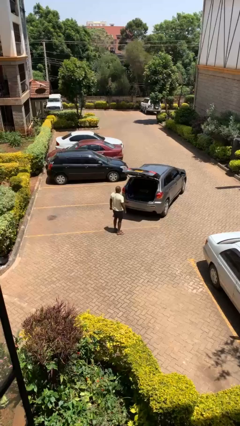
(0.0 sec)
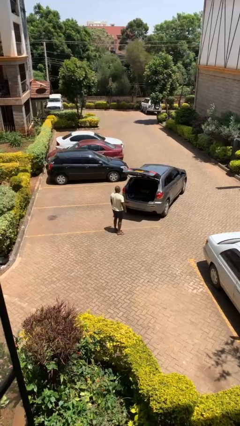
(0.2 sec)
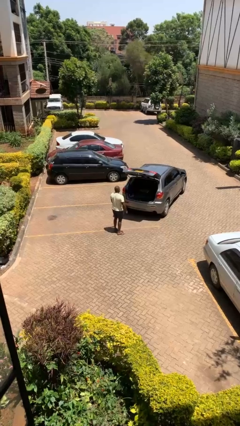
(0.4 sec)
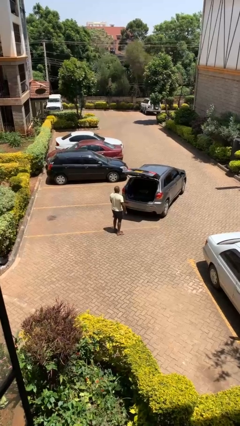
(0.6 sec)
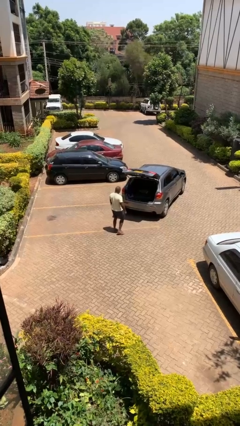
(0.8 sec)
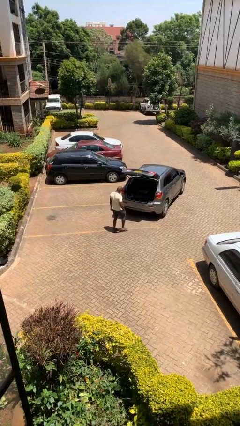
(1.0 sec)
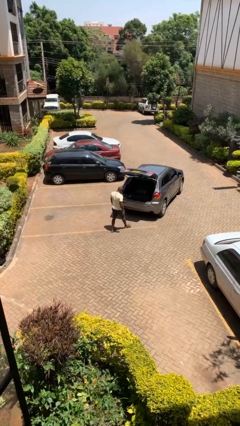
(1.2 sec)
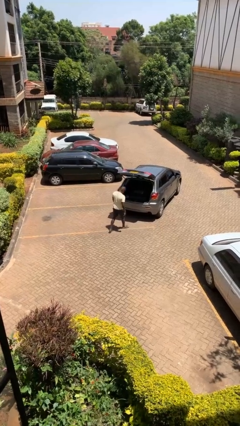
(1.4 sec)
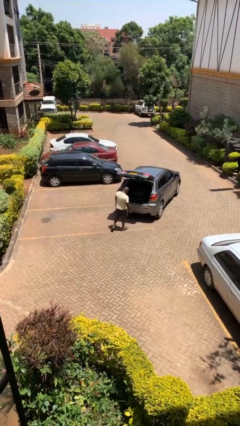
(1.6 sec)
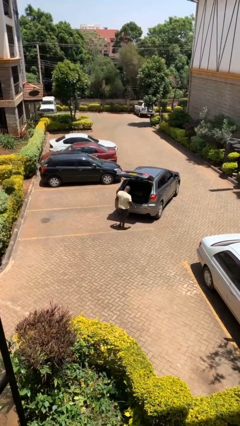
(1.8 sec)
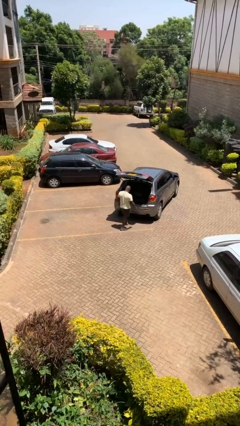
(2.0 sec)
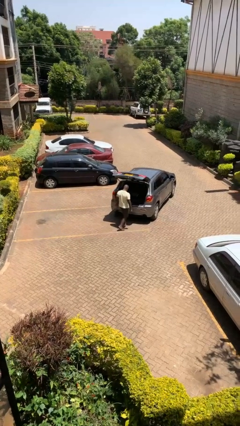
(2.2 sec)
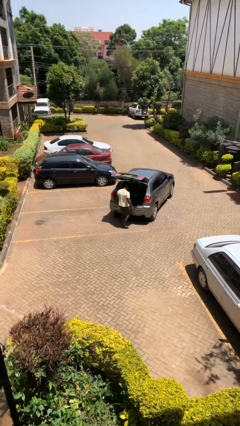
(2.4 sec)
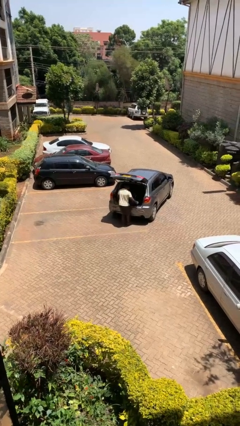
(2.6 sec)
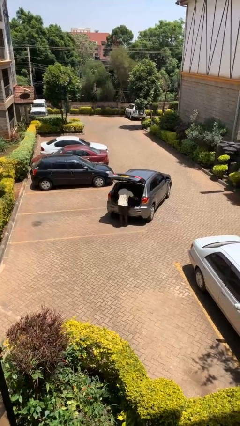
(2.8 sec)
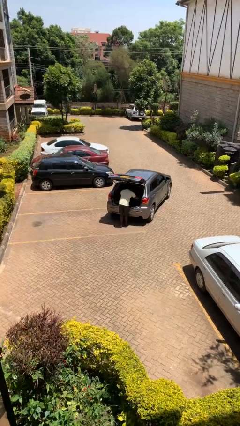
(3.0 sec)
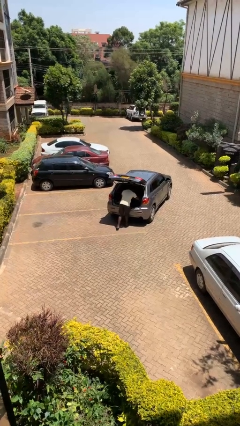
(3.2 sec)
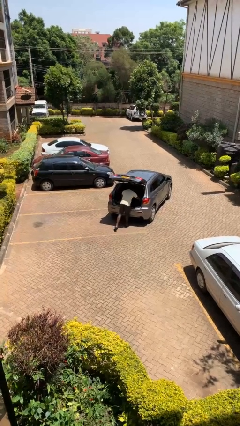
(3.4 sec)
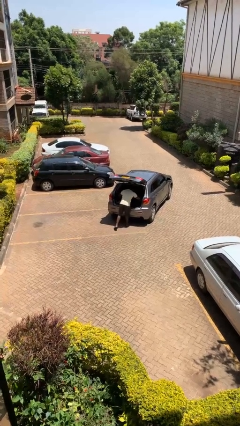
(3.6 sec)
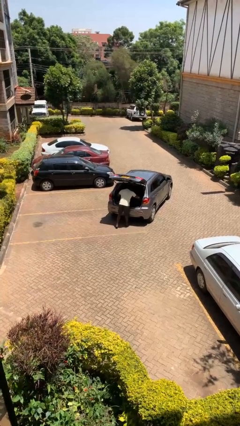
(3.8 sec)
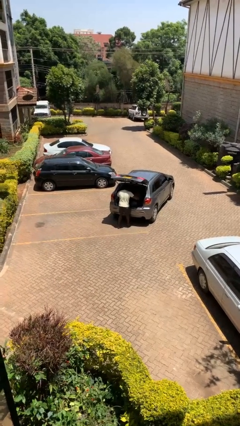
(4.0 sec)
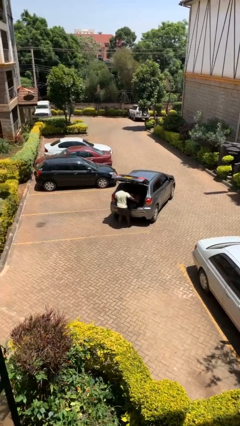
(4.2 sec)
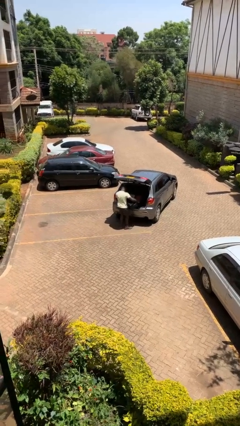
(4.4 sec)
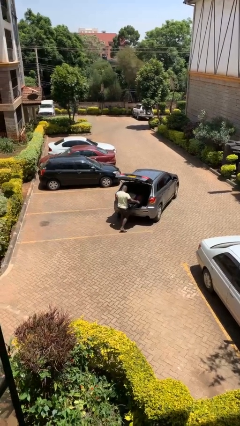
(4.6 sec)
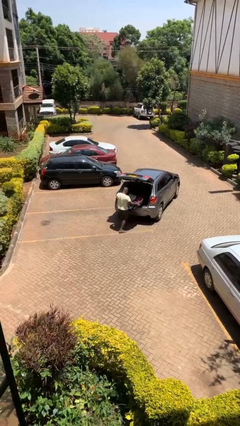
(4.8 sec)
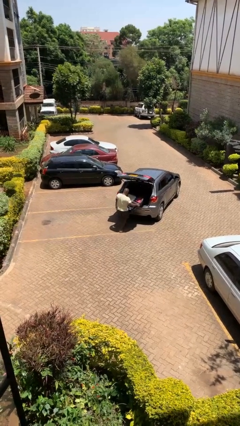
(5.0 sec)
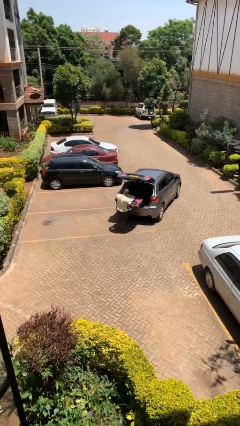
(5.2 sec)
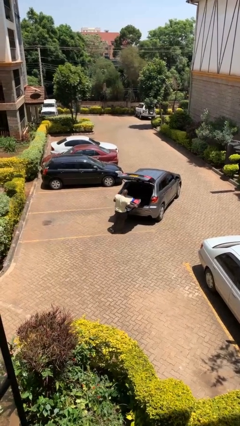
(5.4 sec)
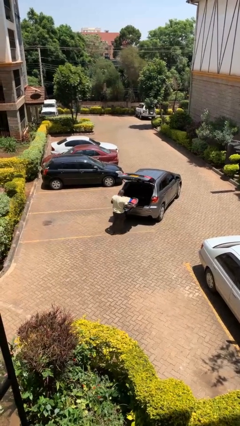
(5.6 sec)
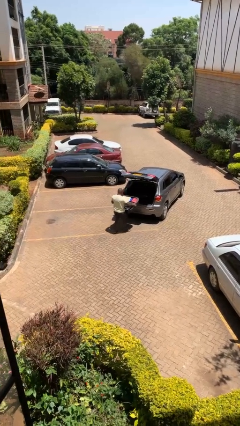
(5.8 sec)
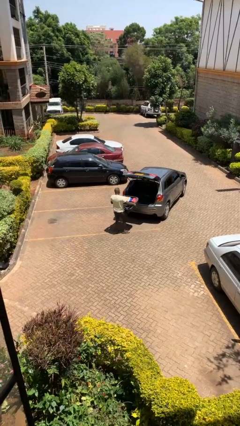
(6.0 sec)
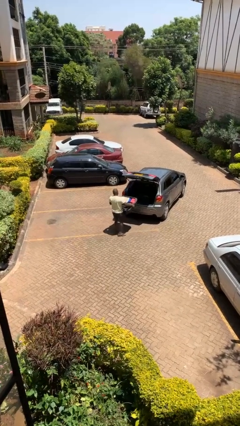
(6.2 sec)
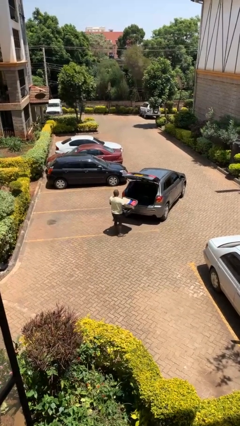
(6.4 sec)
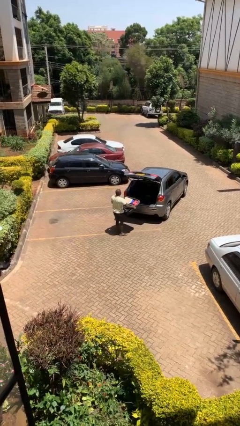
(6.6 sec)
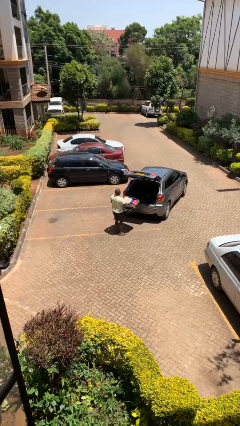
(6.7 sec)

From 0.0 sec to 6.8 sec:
person unloads car

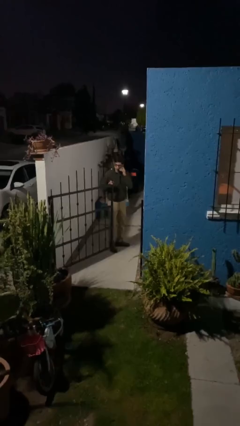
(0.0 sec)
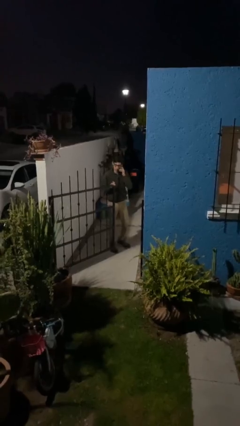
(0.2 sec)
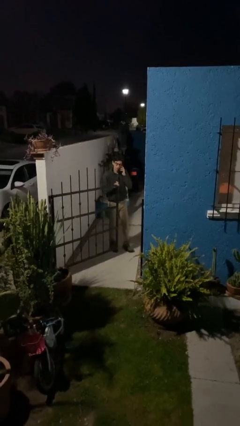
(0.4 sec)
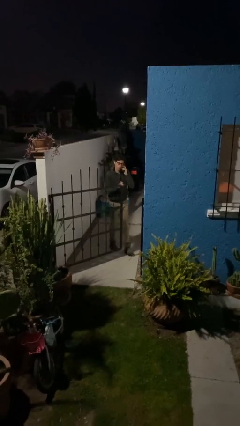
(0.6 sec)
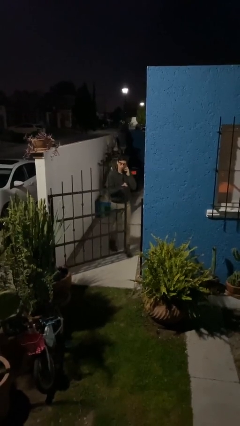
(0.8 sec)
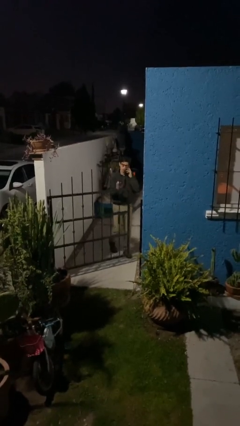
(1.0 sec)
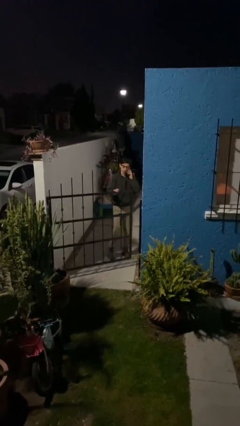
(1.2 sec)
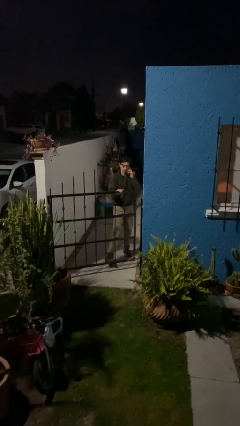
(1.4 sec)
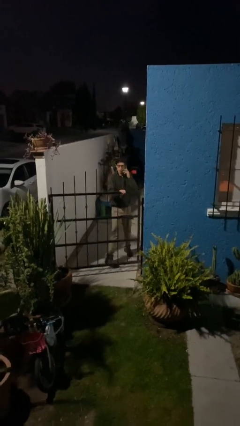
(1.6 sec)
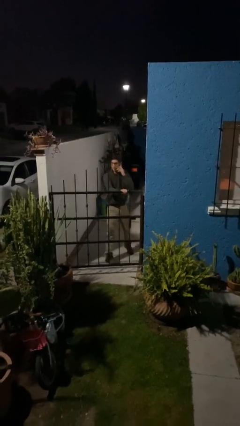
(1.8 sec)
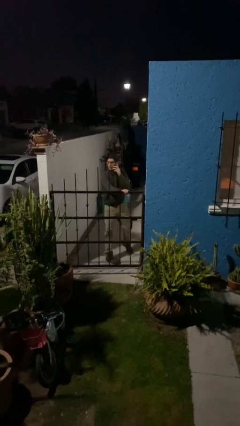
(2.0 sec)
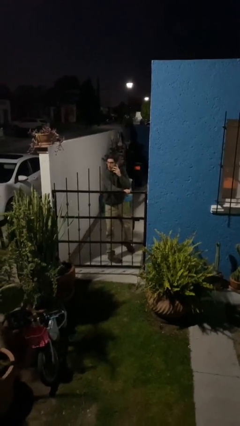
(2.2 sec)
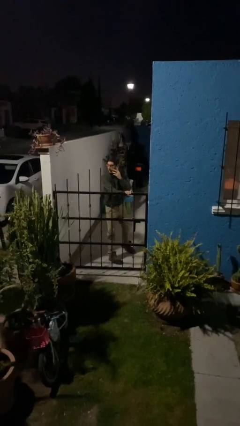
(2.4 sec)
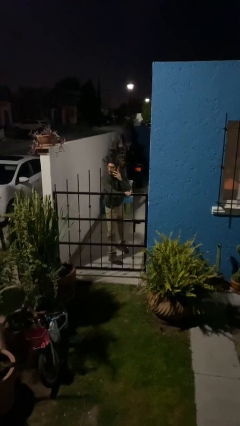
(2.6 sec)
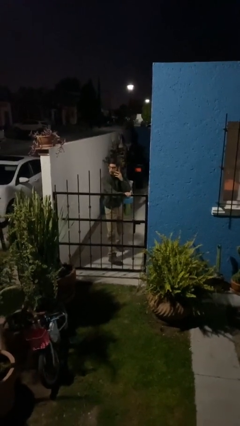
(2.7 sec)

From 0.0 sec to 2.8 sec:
person closes facility door

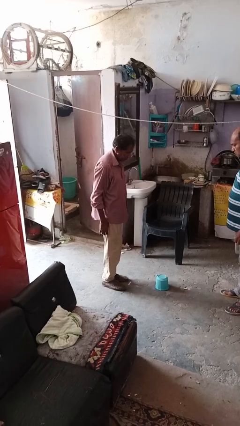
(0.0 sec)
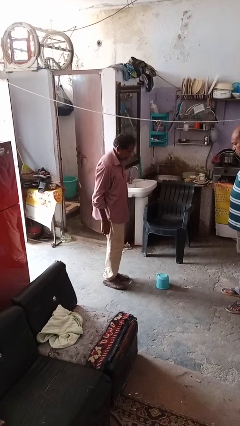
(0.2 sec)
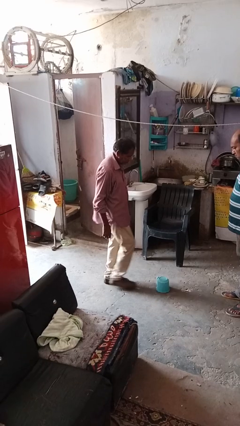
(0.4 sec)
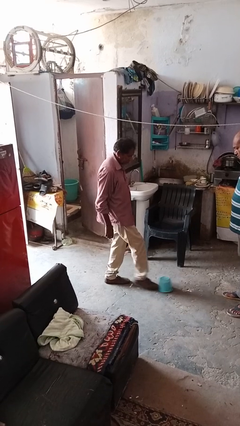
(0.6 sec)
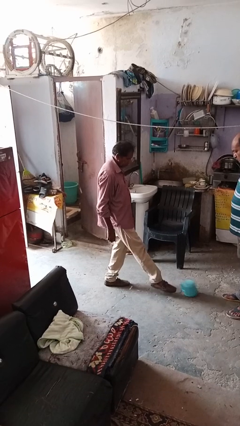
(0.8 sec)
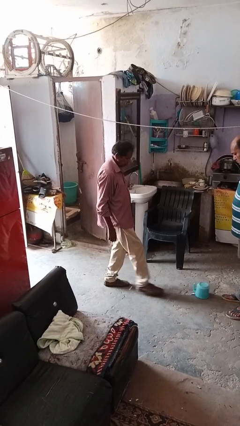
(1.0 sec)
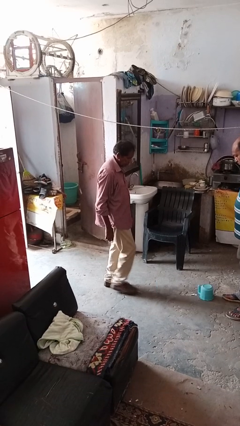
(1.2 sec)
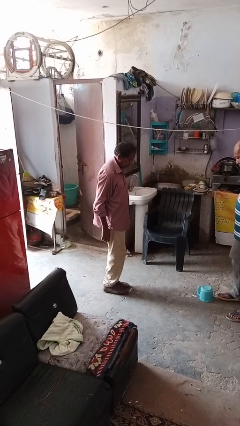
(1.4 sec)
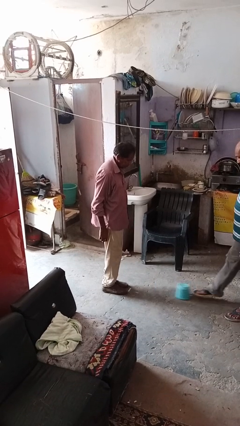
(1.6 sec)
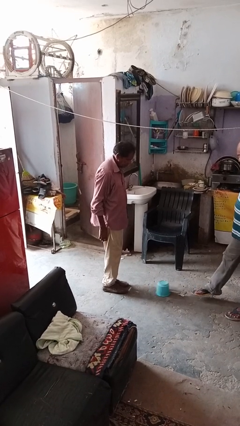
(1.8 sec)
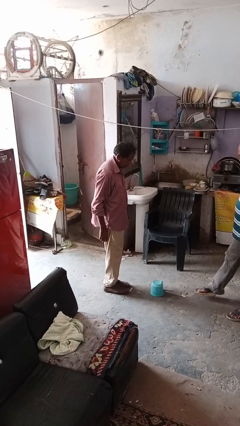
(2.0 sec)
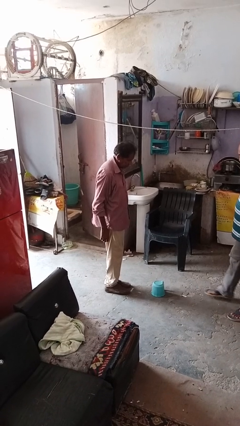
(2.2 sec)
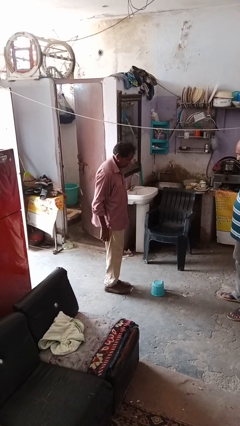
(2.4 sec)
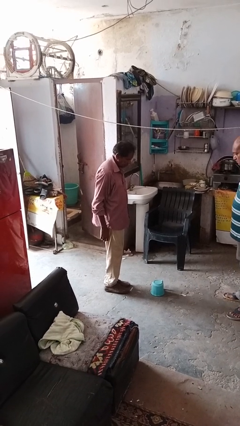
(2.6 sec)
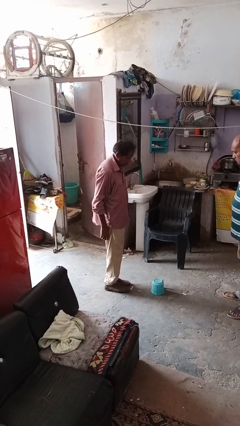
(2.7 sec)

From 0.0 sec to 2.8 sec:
person kicks object to person

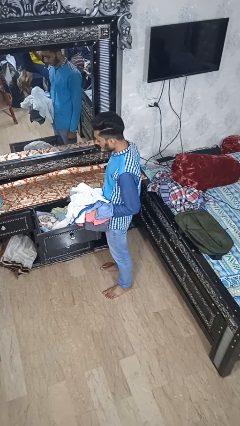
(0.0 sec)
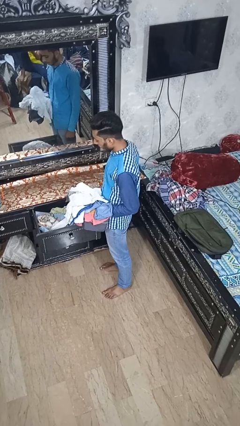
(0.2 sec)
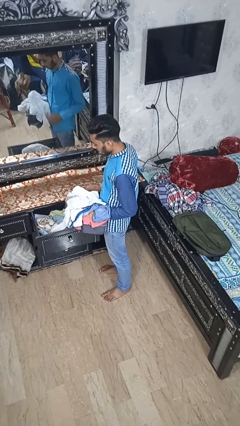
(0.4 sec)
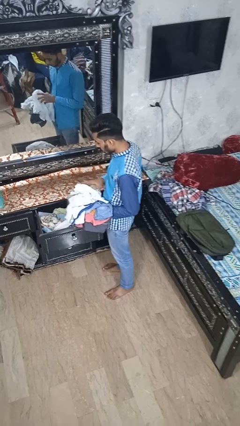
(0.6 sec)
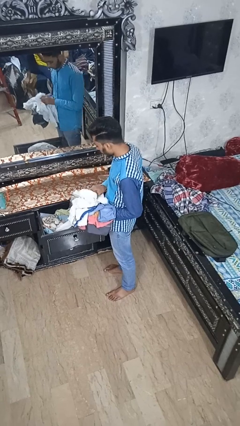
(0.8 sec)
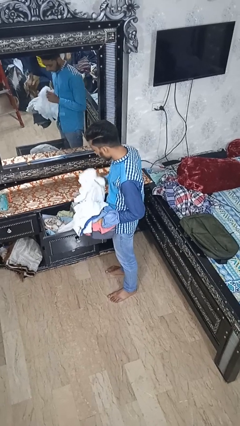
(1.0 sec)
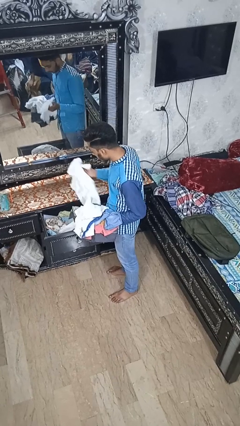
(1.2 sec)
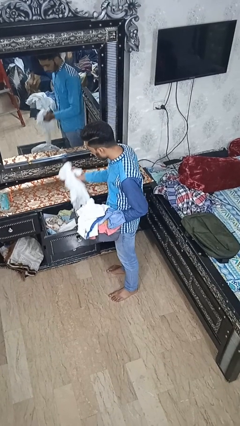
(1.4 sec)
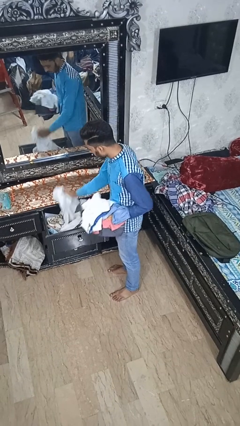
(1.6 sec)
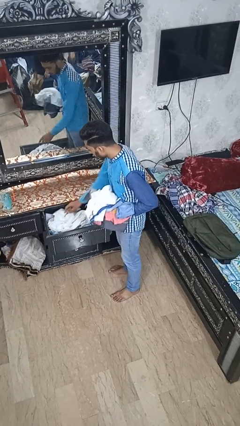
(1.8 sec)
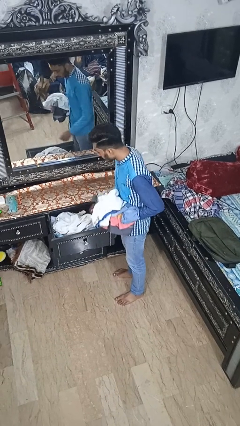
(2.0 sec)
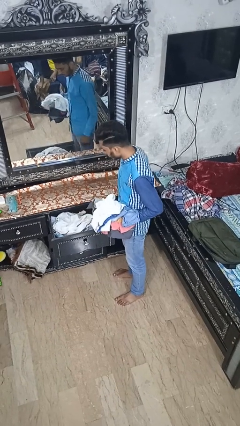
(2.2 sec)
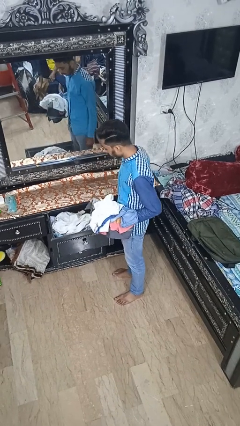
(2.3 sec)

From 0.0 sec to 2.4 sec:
person puts clothes into dresser

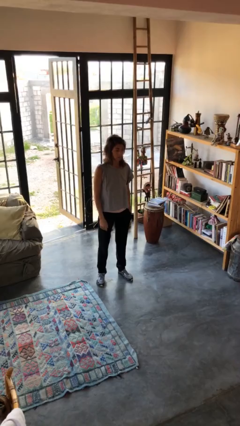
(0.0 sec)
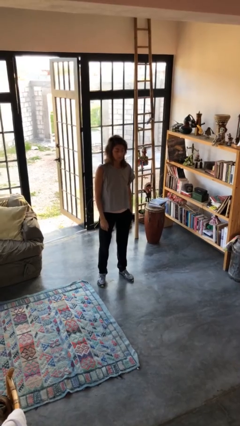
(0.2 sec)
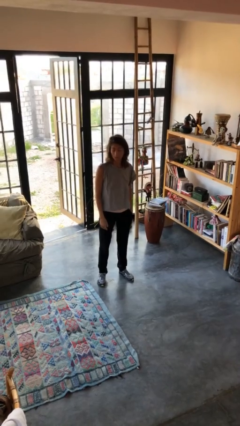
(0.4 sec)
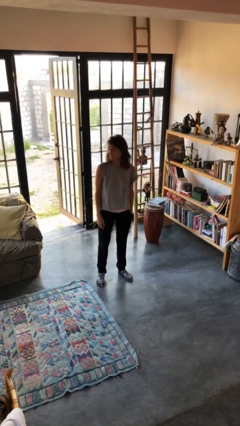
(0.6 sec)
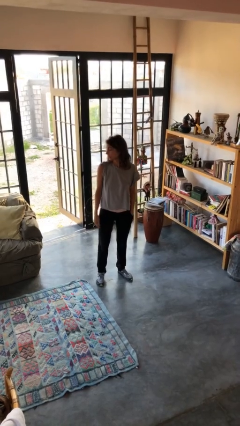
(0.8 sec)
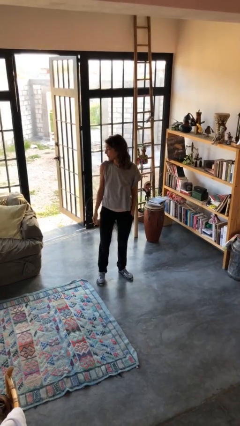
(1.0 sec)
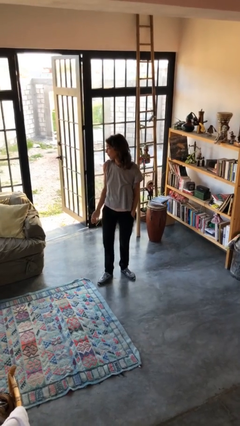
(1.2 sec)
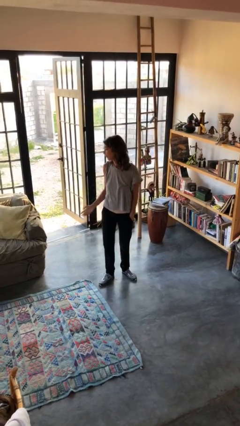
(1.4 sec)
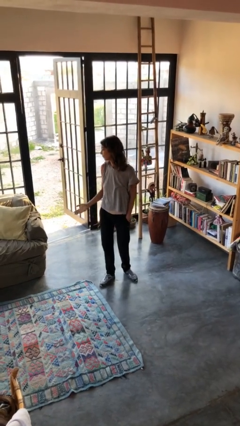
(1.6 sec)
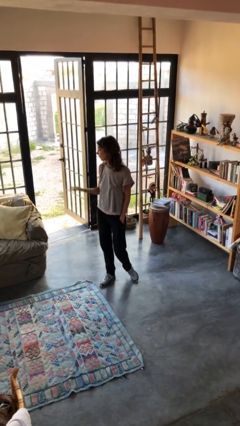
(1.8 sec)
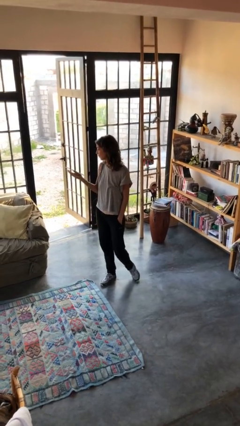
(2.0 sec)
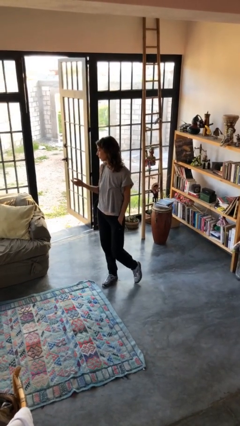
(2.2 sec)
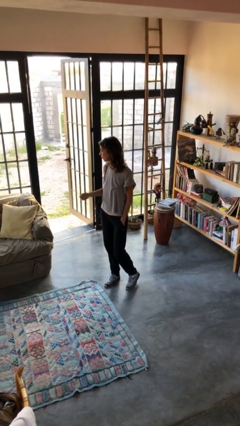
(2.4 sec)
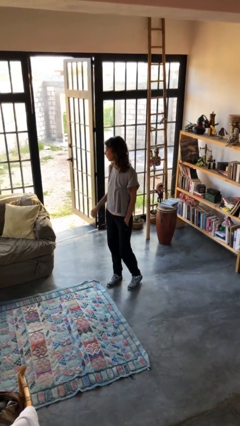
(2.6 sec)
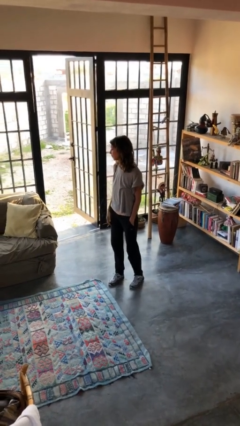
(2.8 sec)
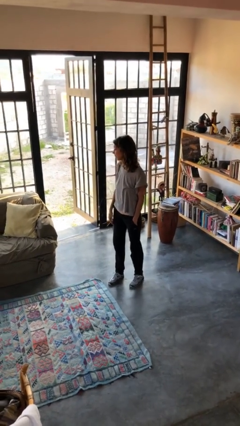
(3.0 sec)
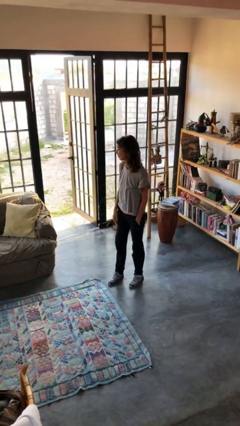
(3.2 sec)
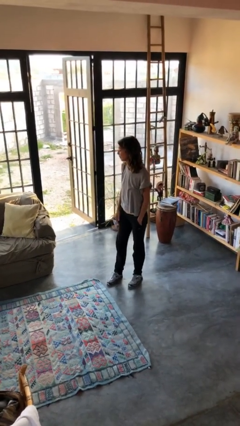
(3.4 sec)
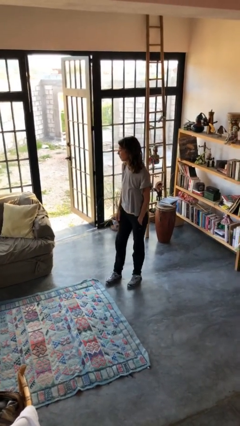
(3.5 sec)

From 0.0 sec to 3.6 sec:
person gestures swipe up
